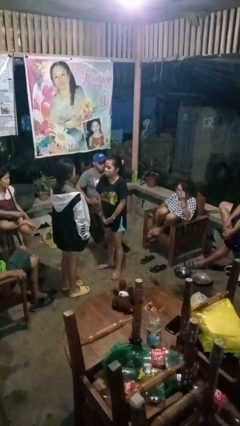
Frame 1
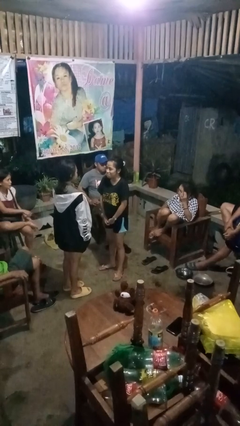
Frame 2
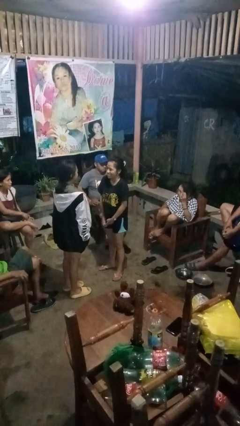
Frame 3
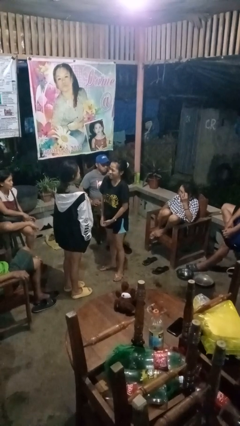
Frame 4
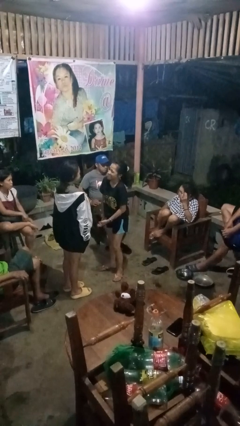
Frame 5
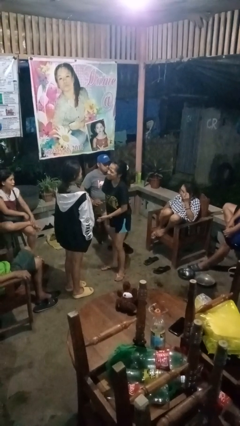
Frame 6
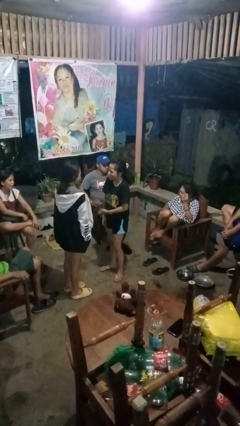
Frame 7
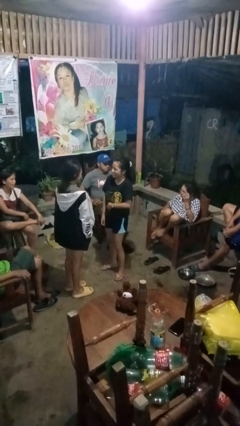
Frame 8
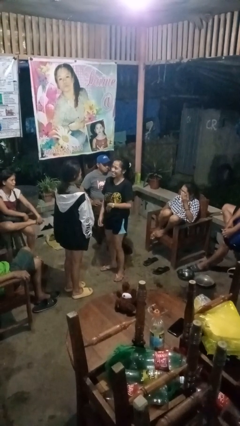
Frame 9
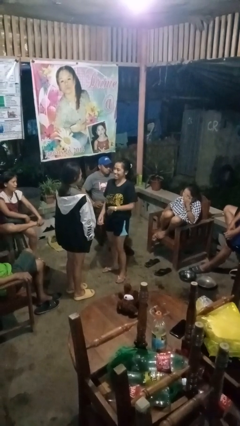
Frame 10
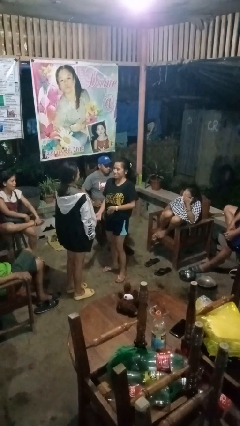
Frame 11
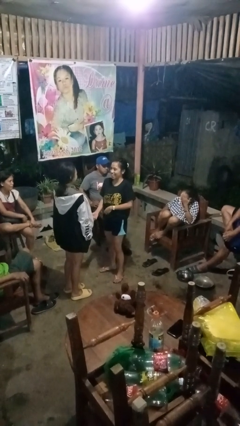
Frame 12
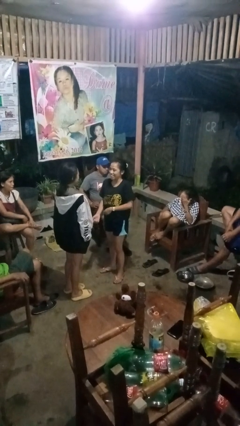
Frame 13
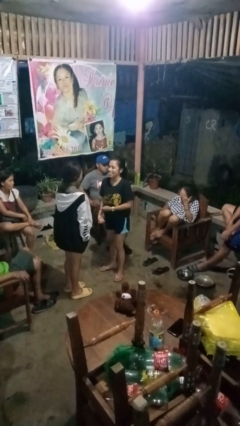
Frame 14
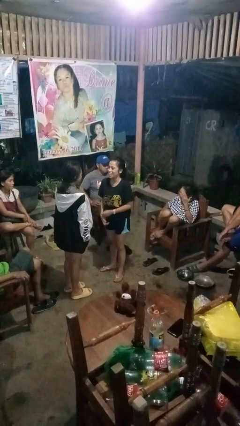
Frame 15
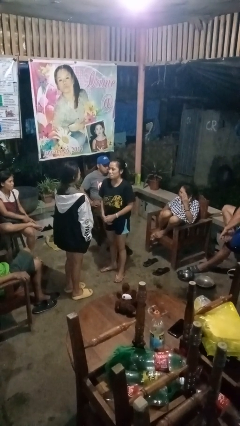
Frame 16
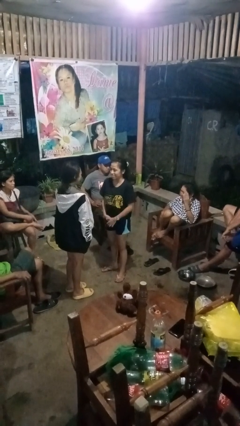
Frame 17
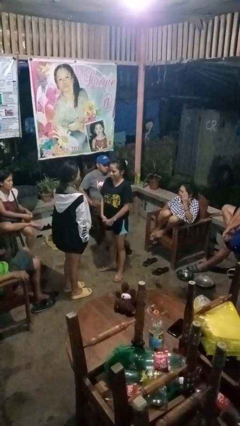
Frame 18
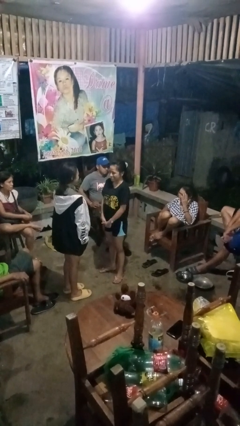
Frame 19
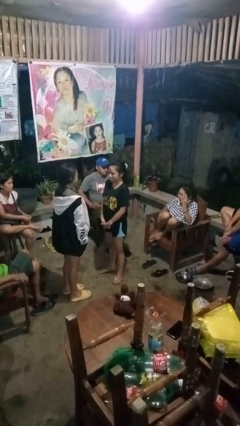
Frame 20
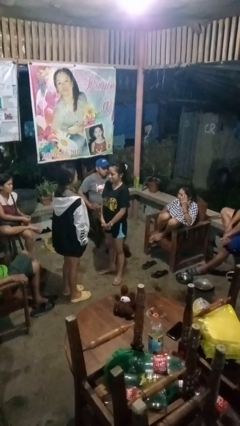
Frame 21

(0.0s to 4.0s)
person laughs with person

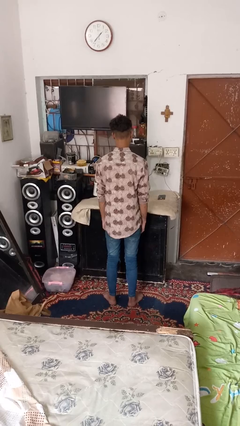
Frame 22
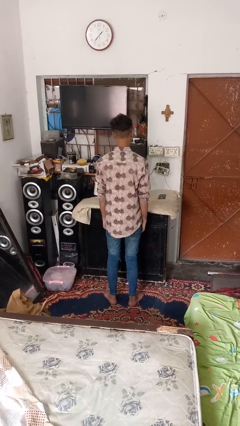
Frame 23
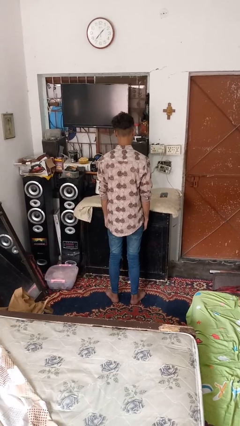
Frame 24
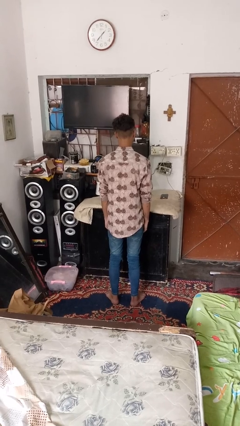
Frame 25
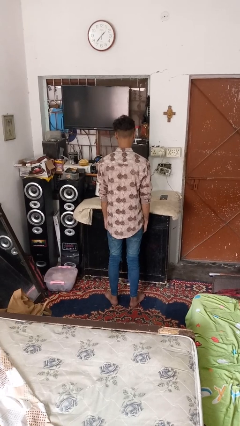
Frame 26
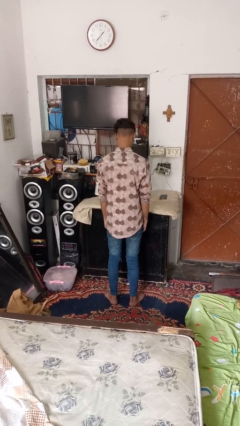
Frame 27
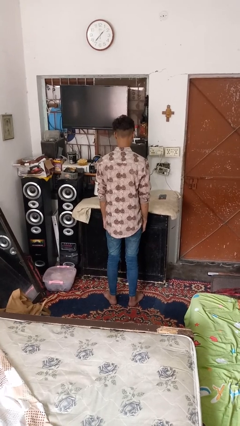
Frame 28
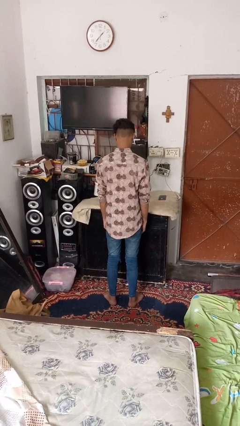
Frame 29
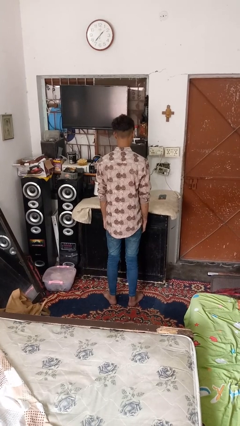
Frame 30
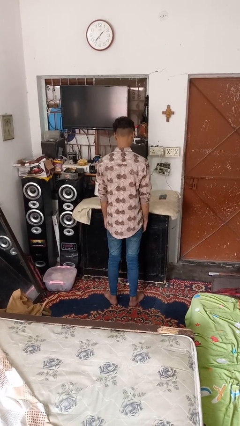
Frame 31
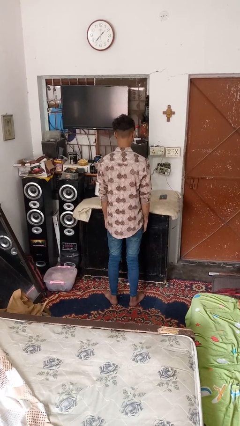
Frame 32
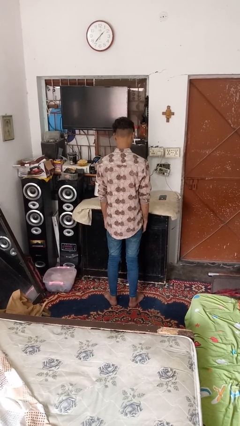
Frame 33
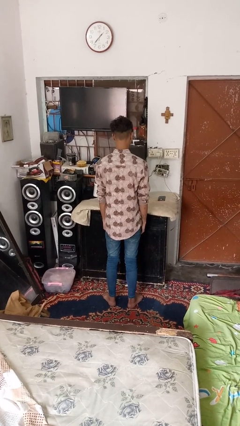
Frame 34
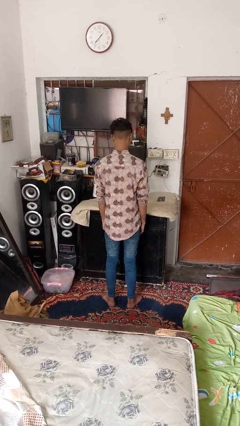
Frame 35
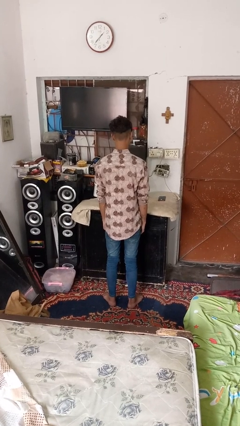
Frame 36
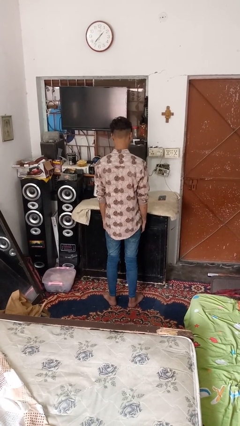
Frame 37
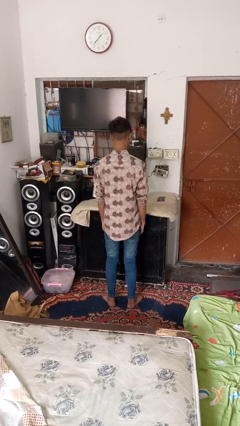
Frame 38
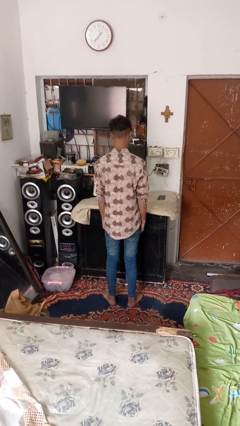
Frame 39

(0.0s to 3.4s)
person nods head

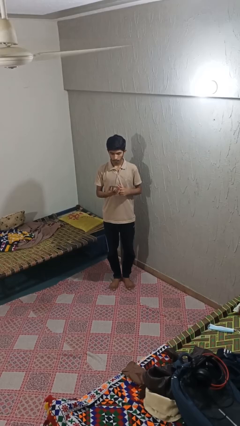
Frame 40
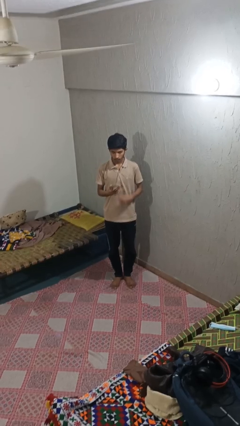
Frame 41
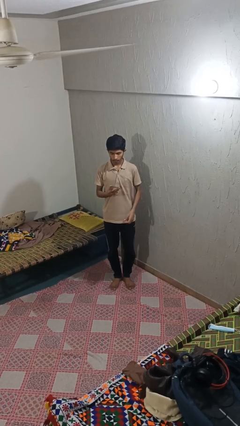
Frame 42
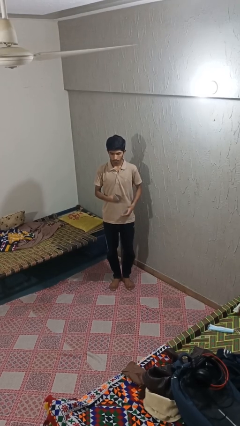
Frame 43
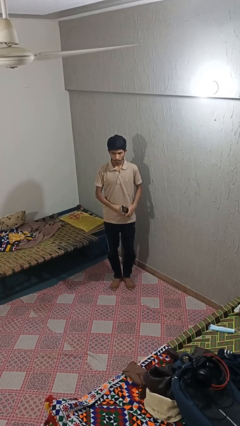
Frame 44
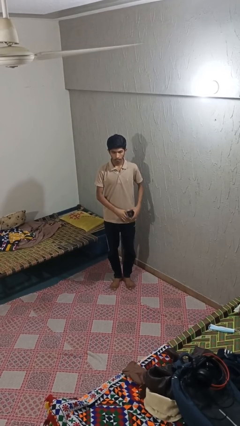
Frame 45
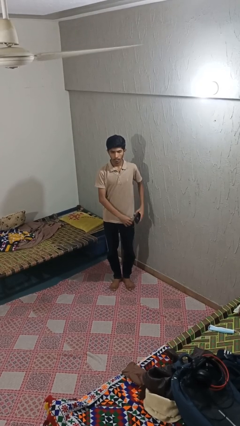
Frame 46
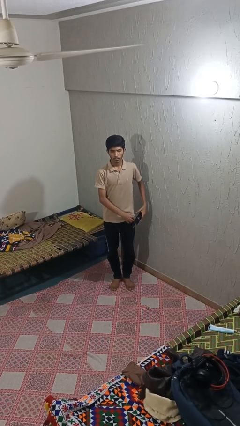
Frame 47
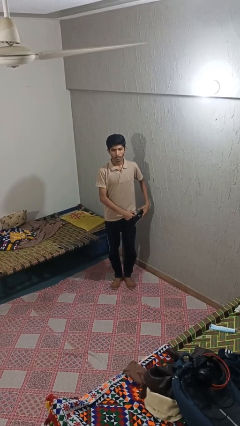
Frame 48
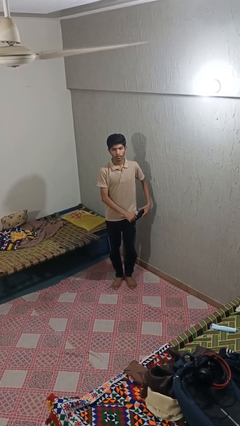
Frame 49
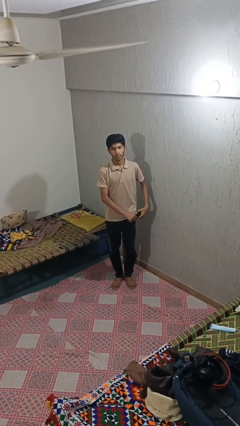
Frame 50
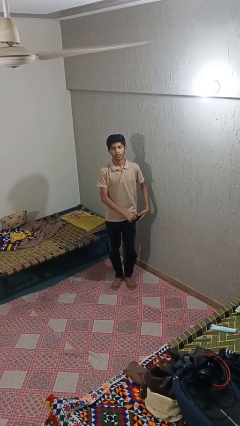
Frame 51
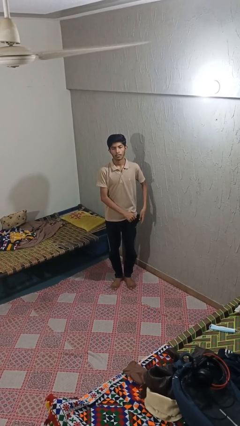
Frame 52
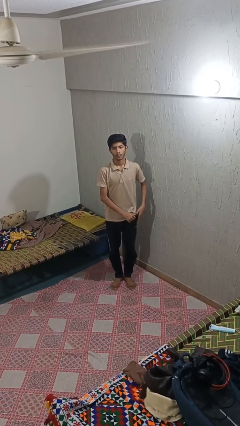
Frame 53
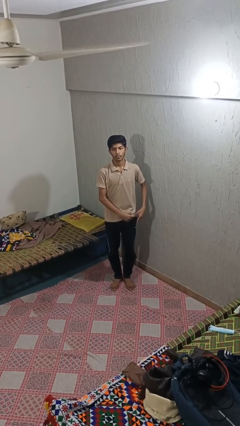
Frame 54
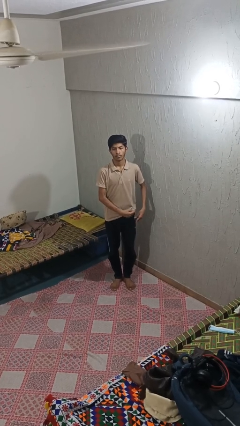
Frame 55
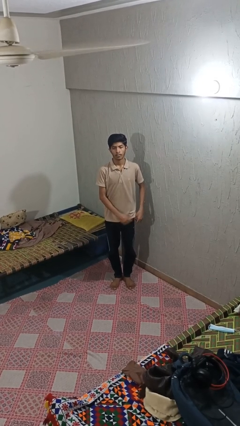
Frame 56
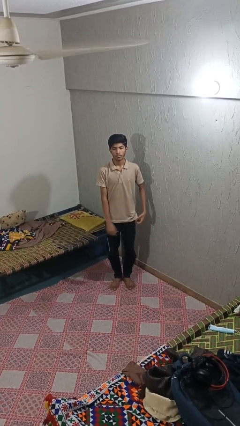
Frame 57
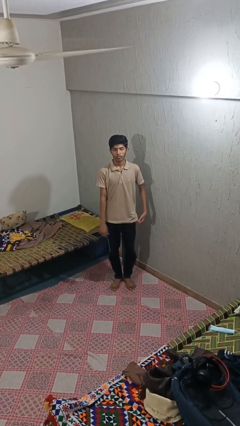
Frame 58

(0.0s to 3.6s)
person puts phone into pocket

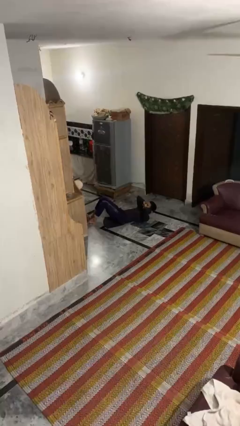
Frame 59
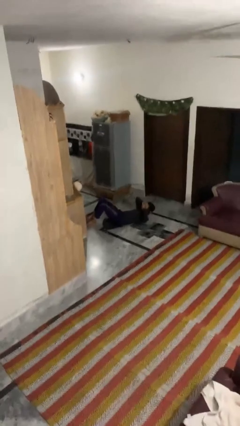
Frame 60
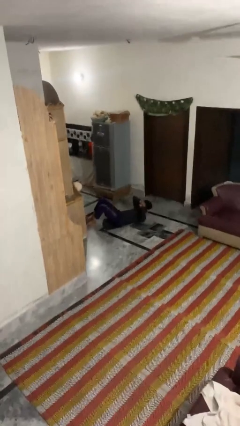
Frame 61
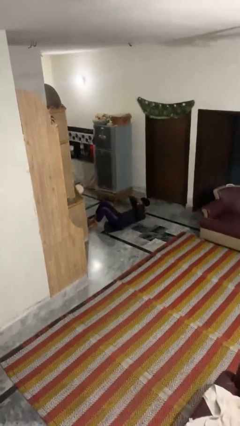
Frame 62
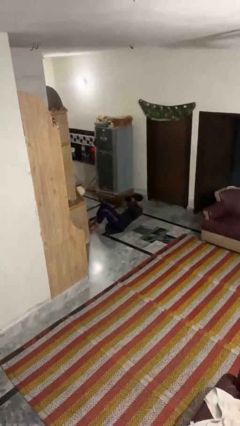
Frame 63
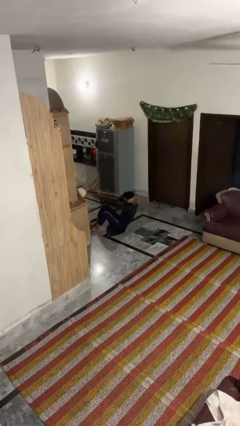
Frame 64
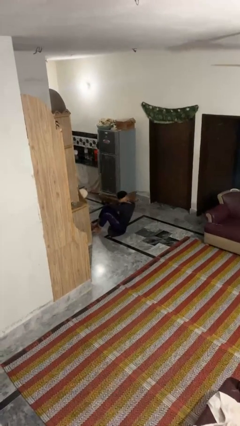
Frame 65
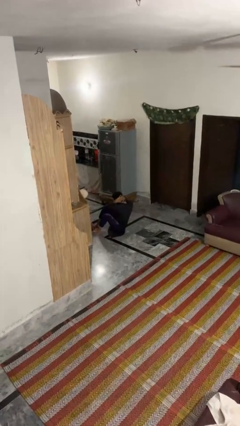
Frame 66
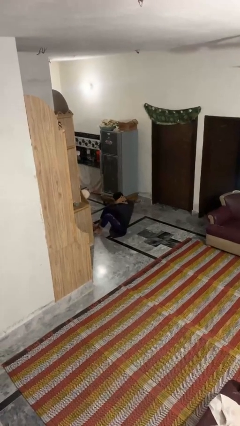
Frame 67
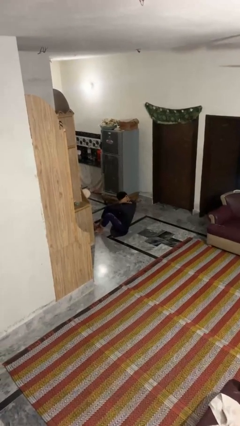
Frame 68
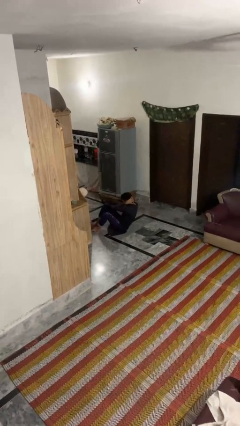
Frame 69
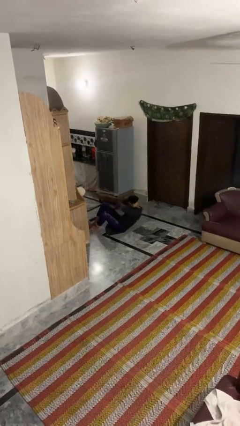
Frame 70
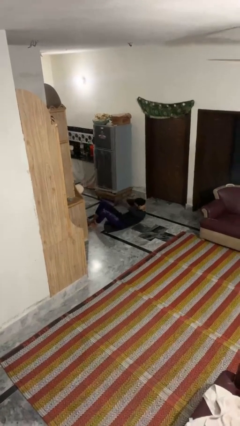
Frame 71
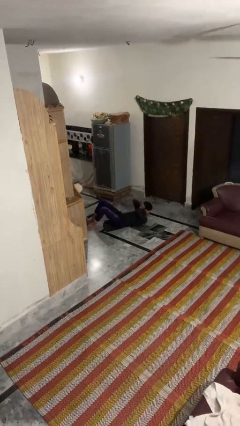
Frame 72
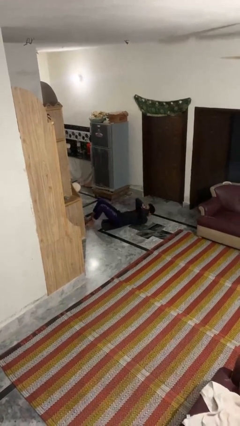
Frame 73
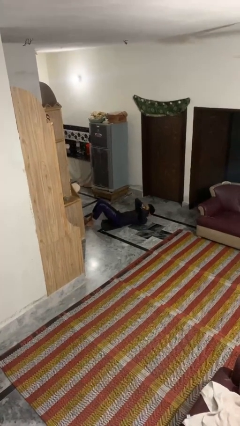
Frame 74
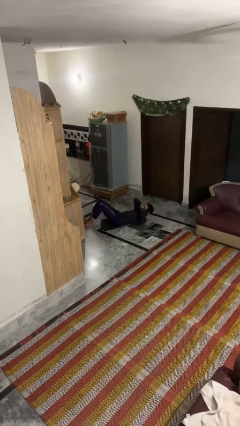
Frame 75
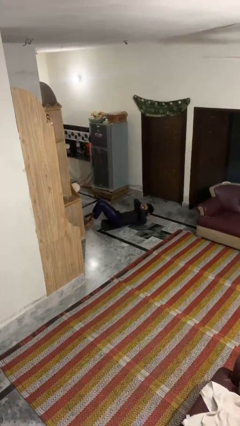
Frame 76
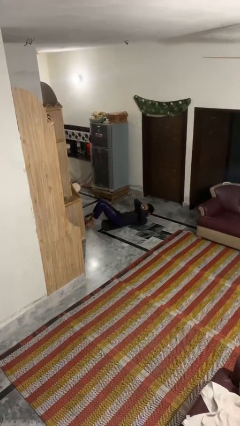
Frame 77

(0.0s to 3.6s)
person exercises with situp

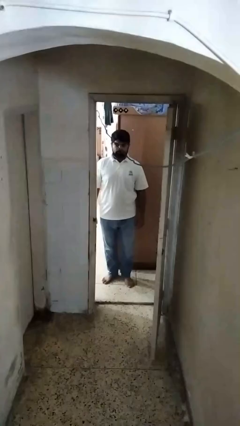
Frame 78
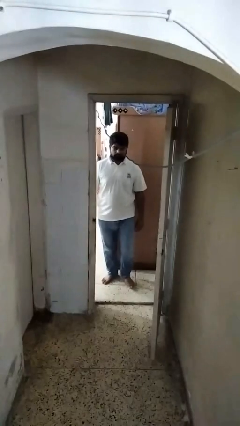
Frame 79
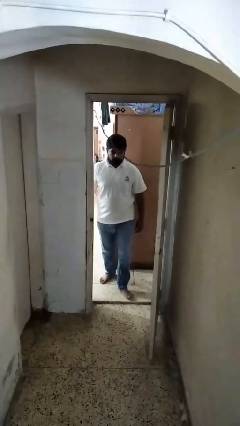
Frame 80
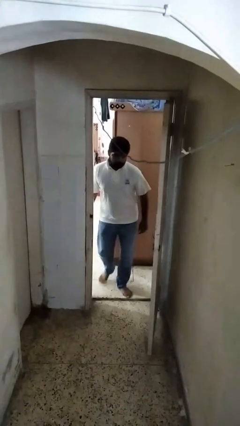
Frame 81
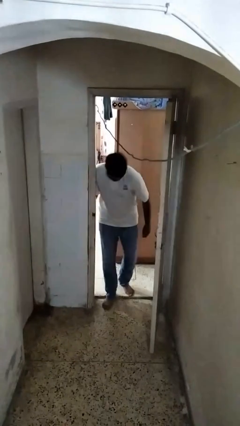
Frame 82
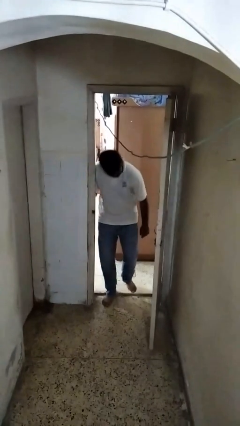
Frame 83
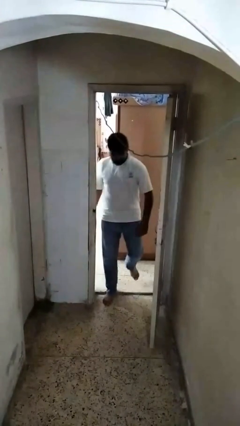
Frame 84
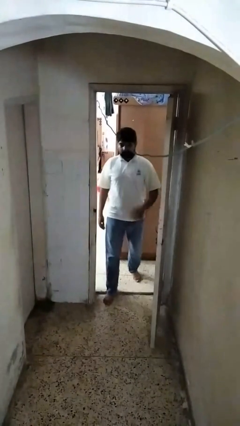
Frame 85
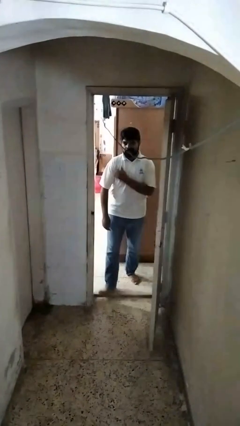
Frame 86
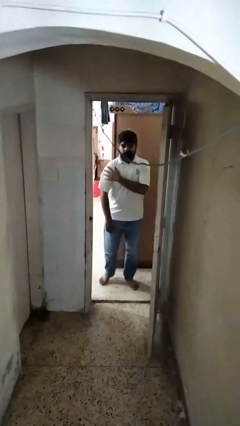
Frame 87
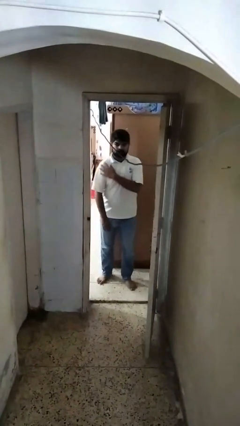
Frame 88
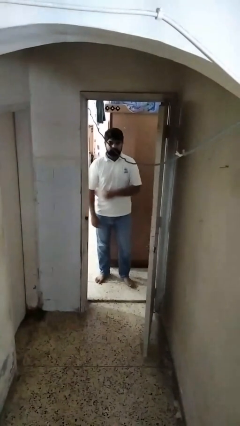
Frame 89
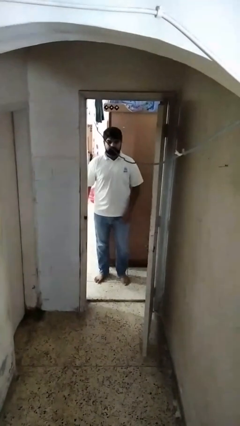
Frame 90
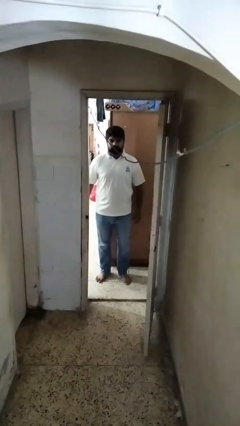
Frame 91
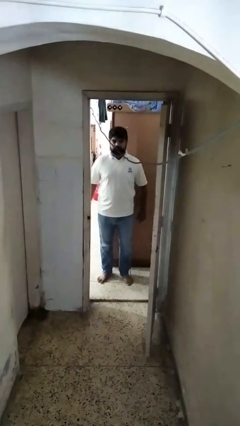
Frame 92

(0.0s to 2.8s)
person bumps into wall
